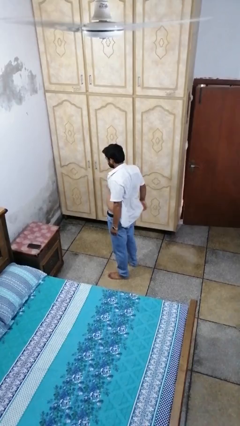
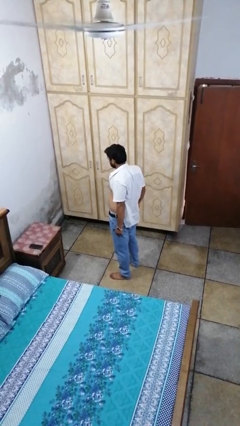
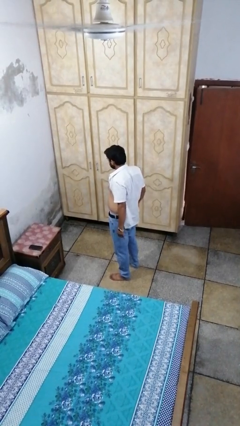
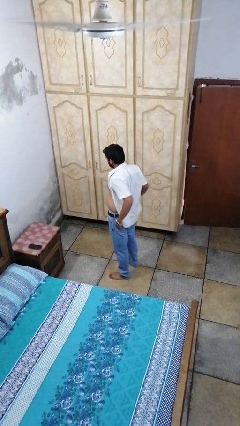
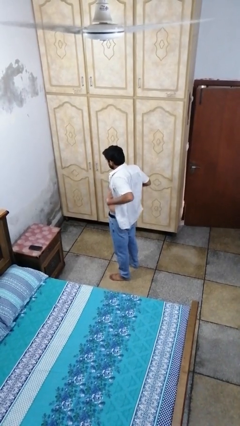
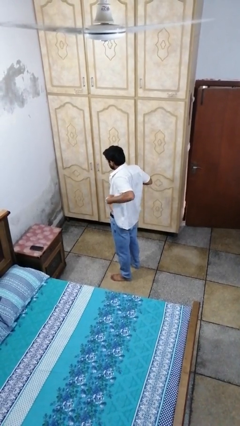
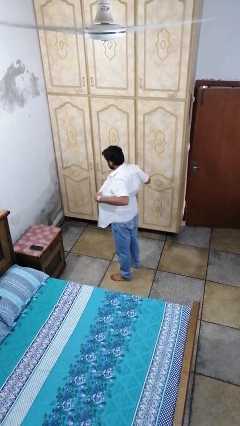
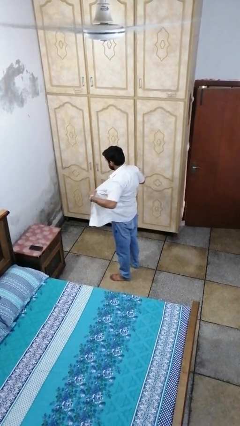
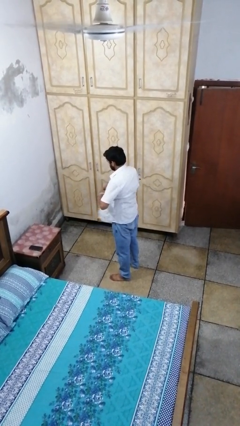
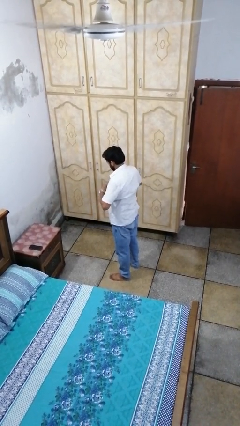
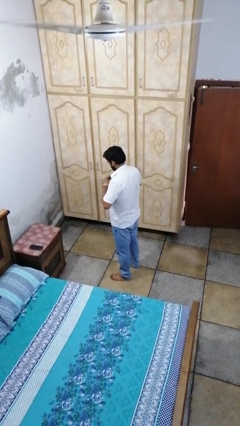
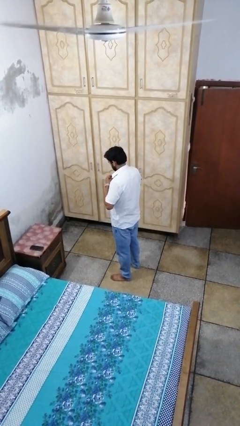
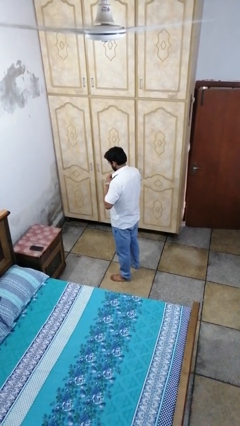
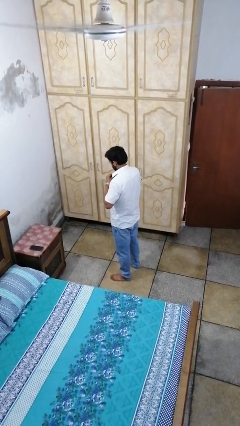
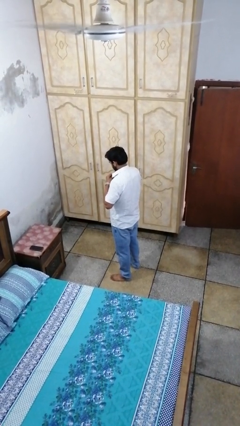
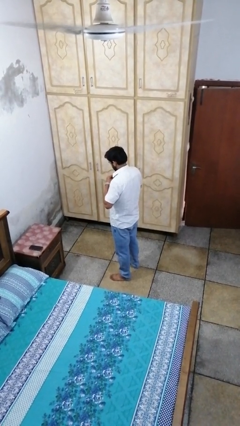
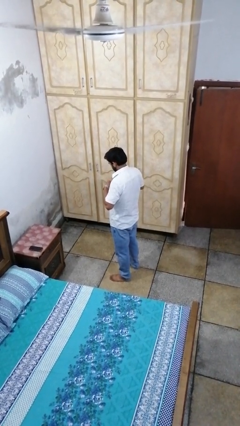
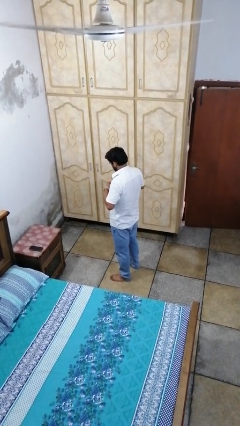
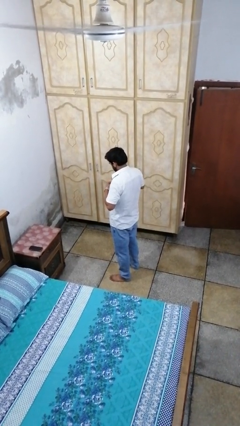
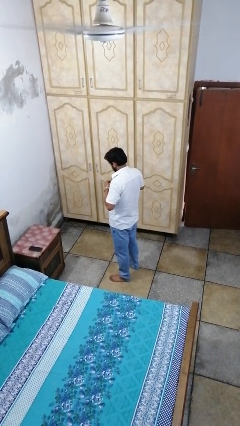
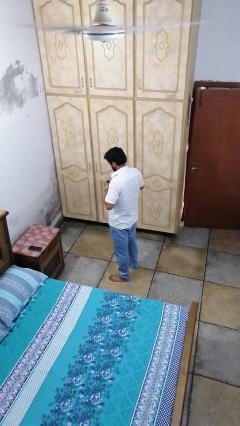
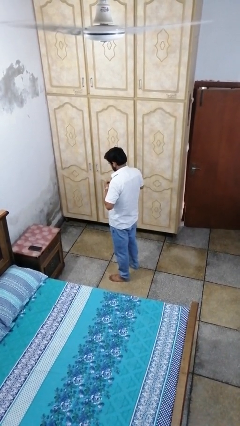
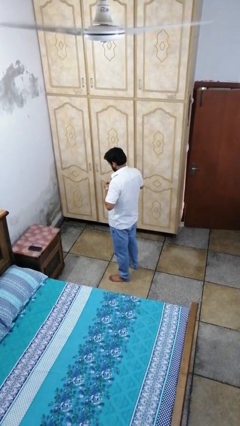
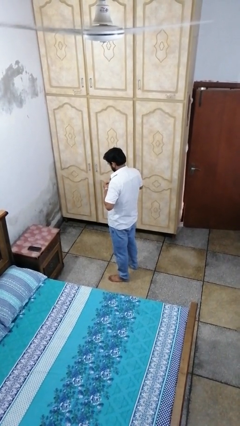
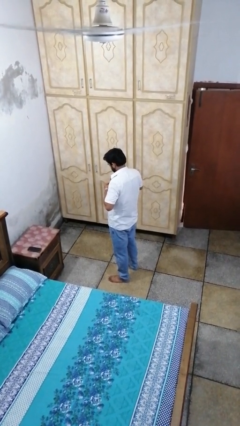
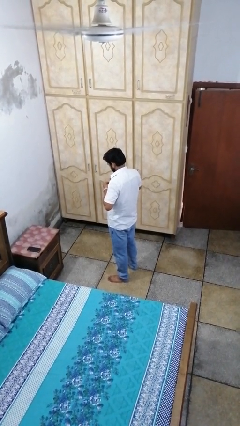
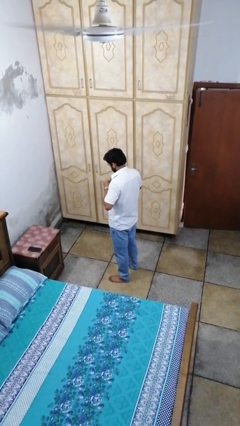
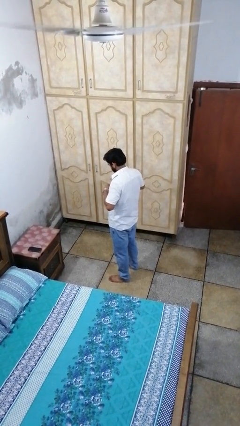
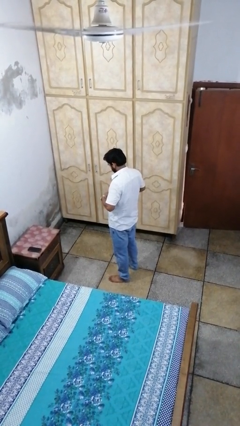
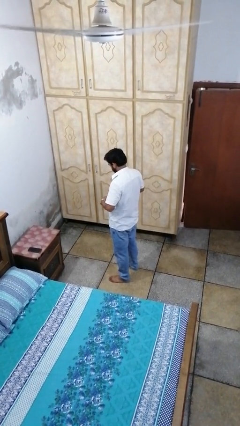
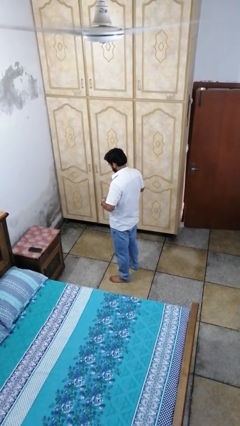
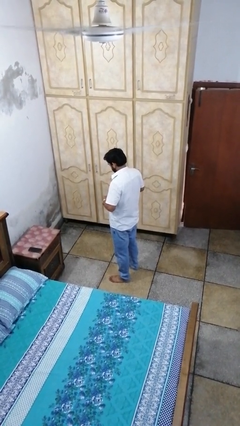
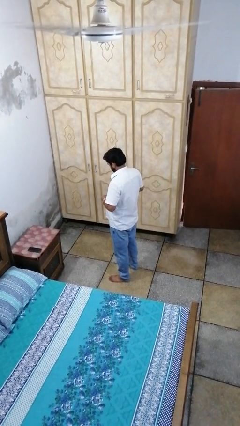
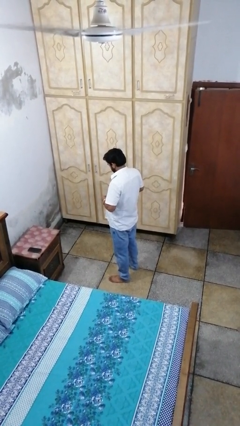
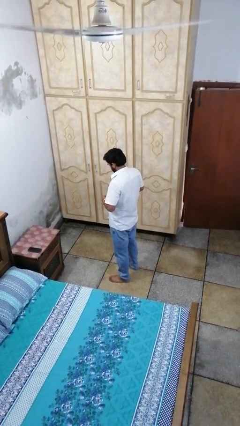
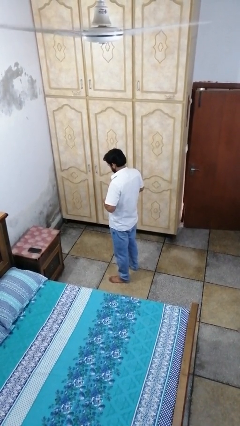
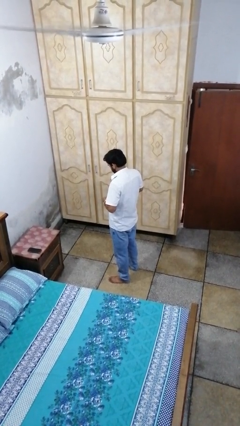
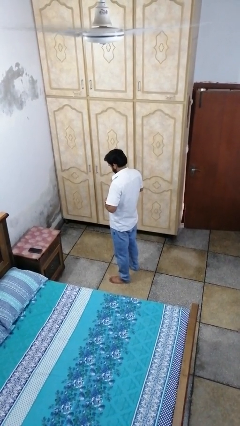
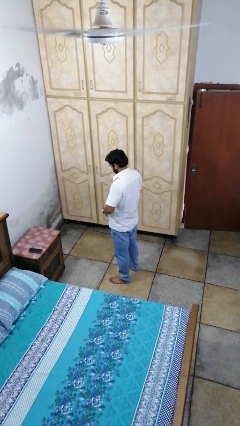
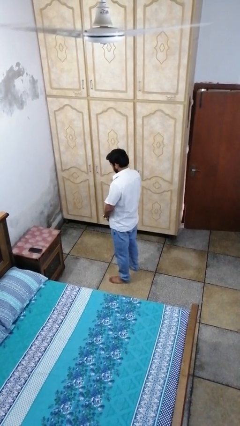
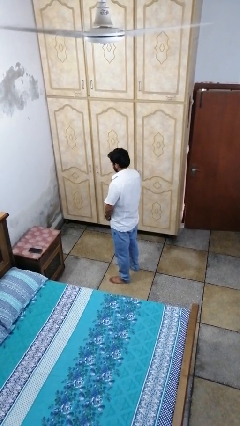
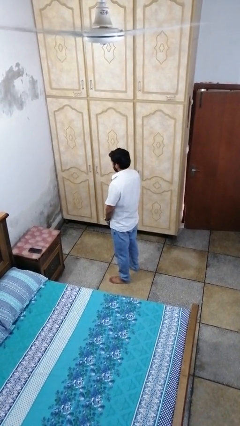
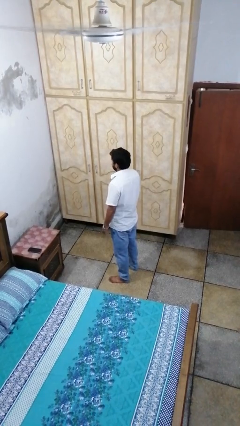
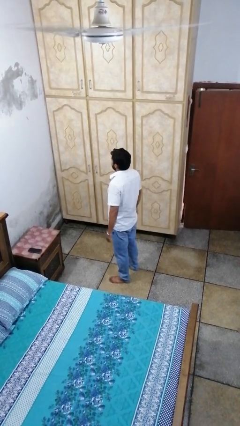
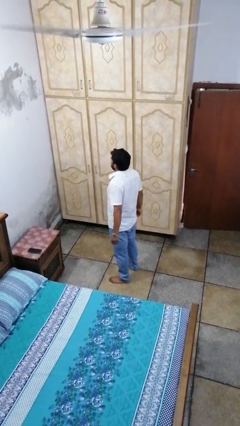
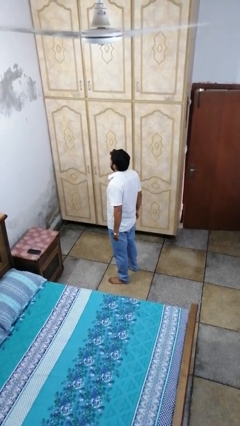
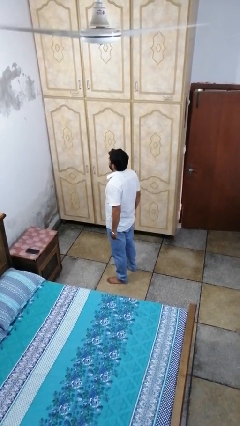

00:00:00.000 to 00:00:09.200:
person buttons shirt

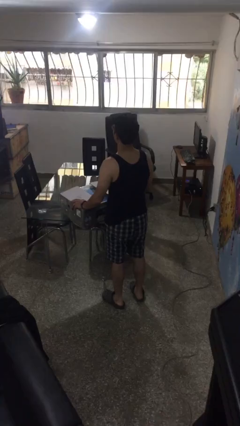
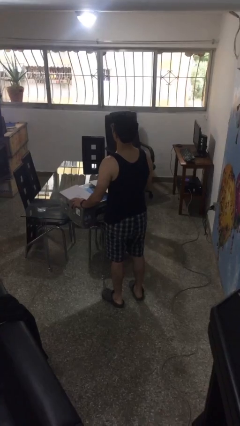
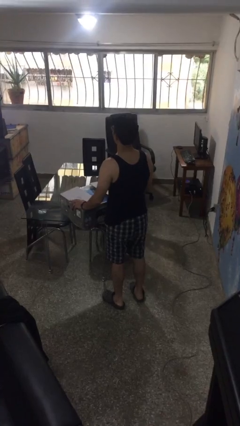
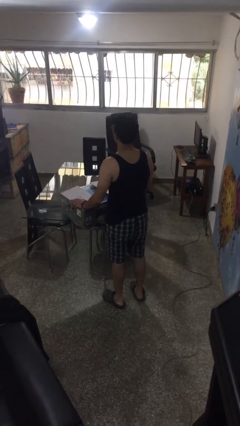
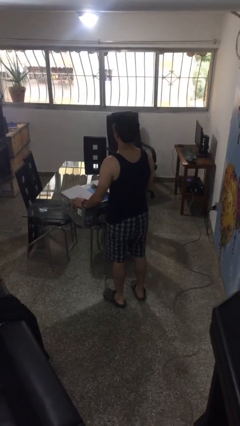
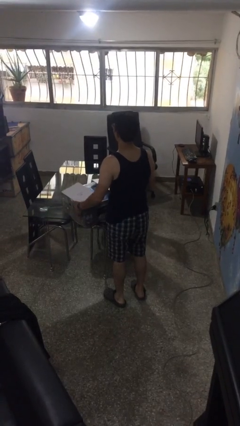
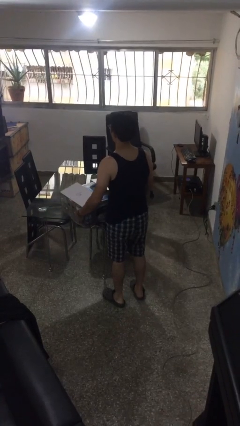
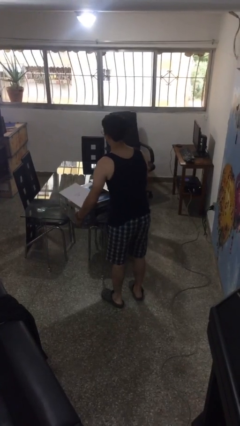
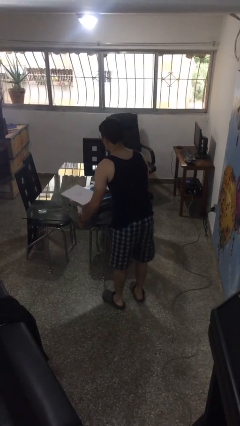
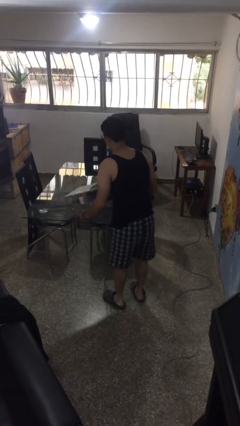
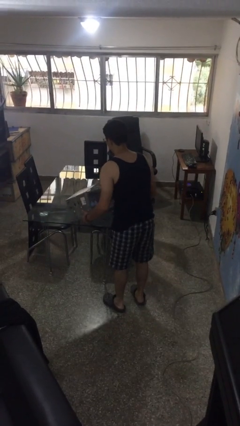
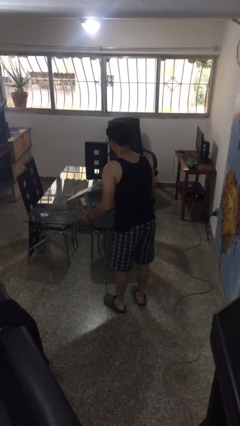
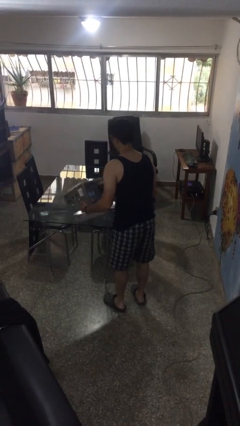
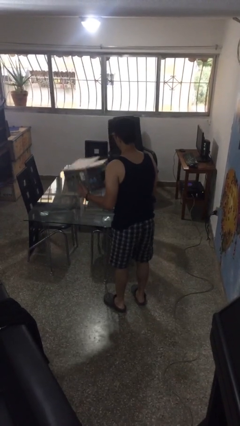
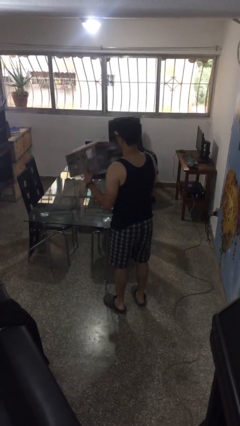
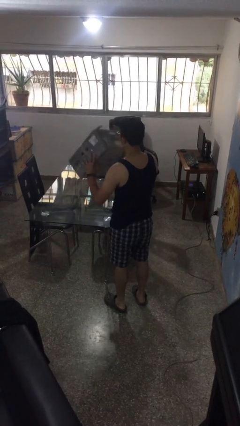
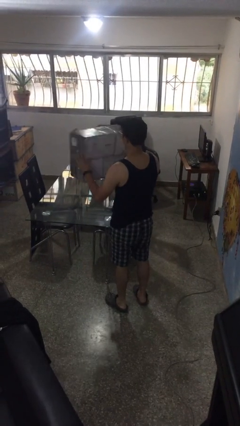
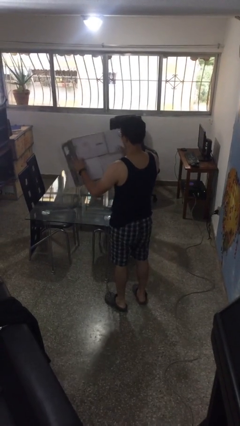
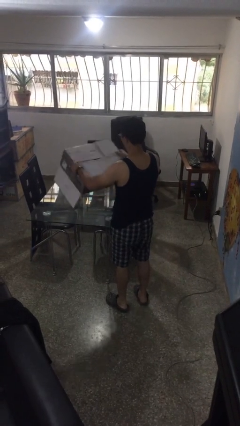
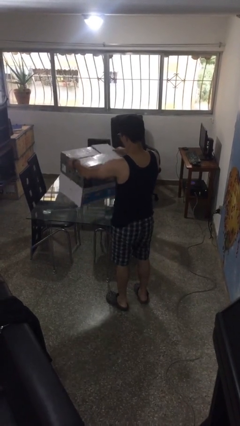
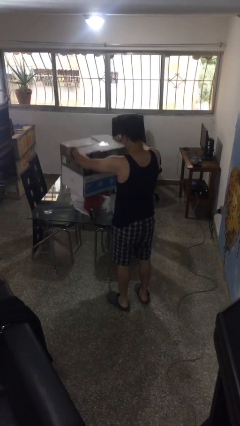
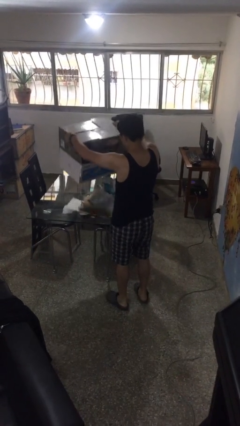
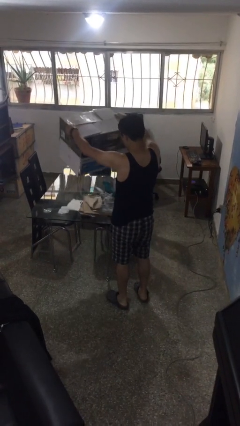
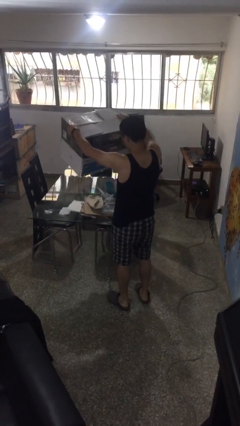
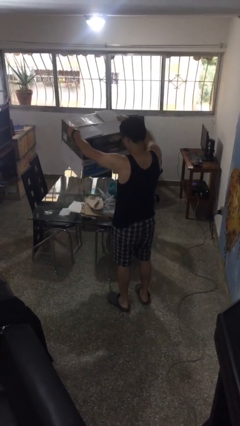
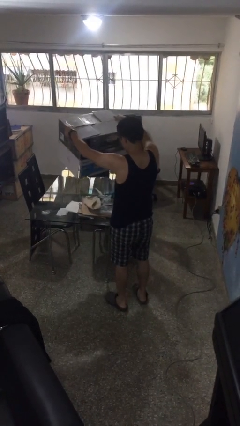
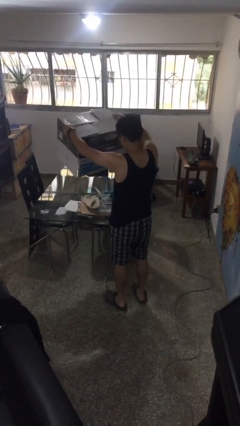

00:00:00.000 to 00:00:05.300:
person unloads box onto table

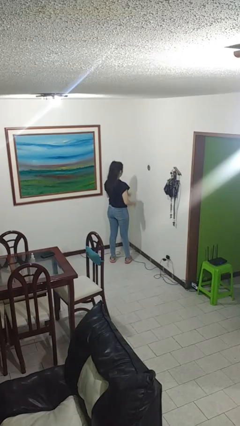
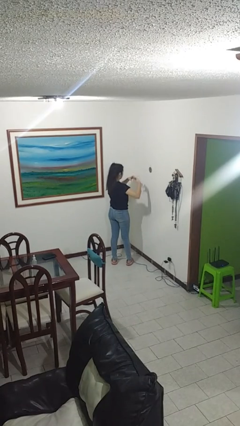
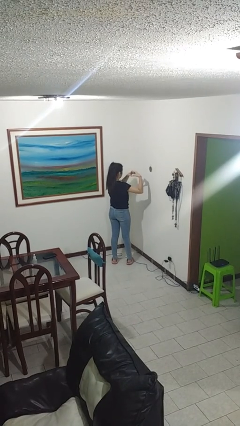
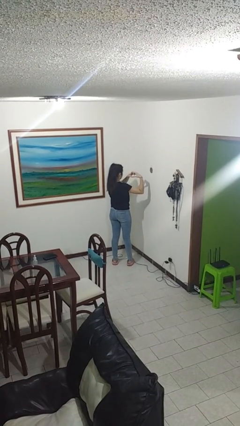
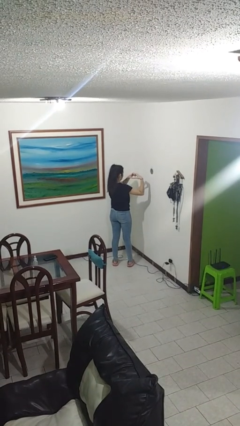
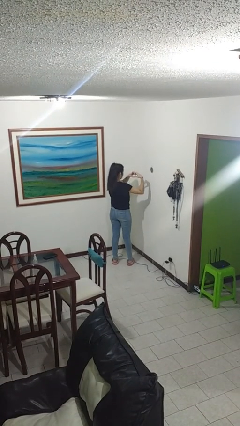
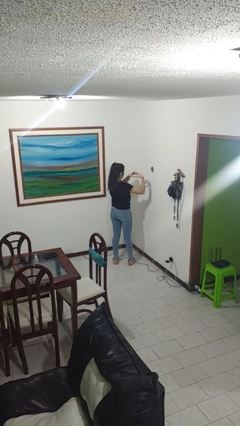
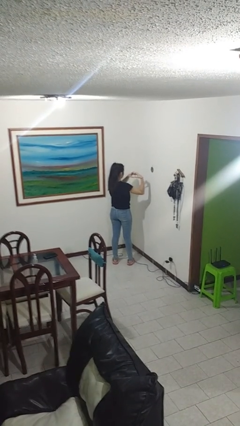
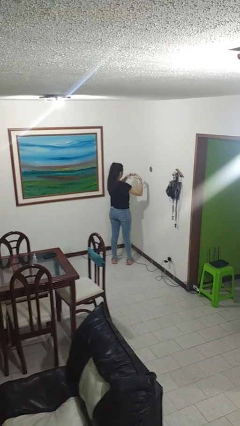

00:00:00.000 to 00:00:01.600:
person gestures heart

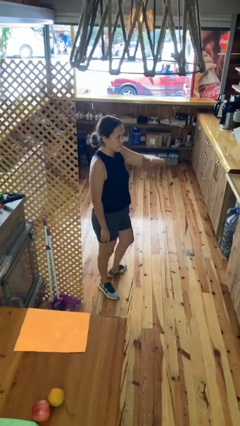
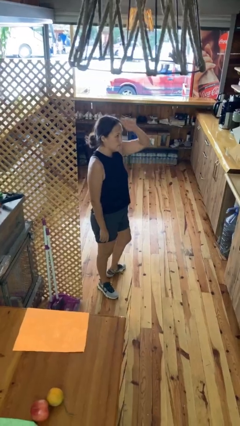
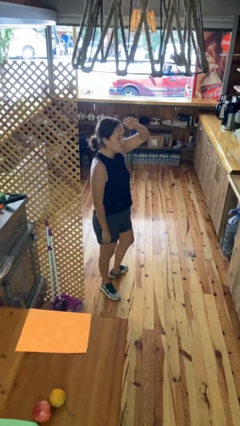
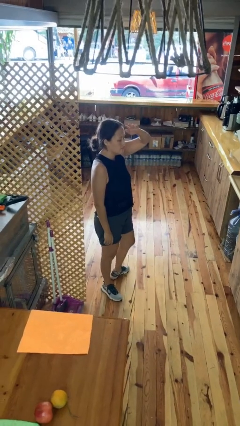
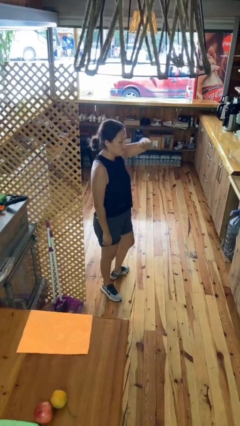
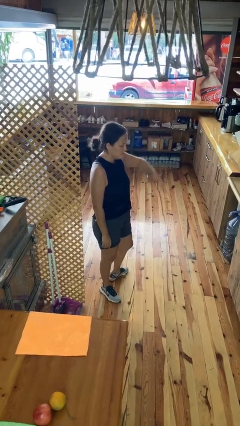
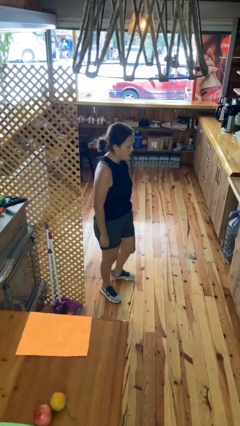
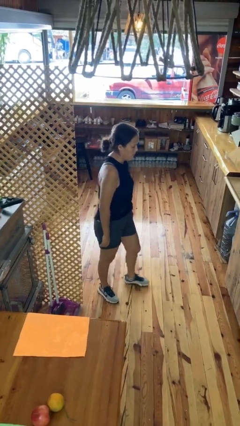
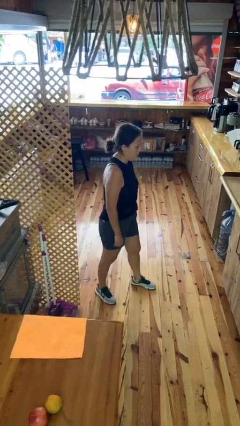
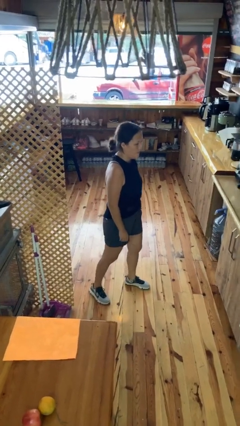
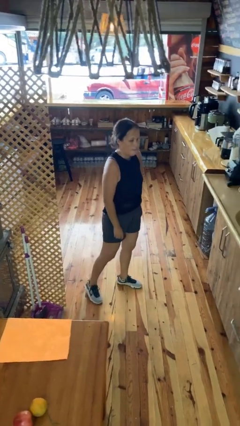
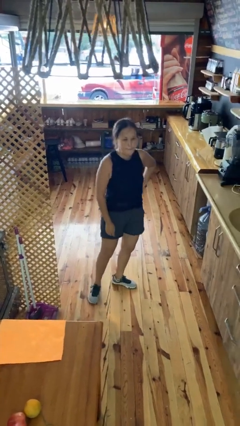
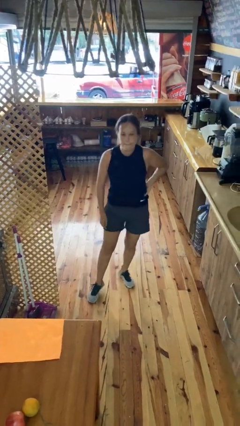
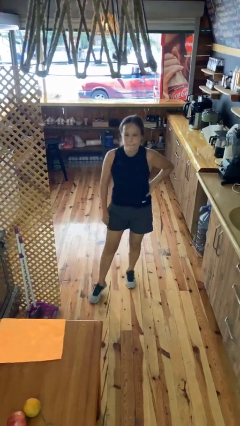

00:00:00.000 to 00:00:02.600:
person salutes
